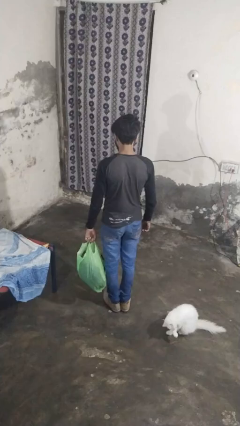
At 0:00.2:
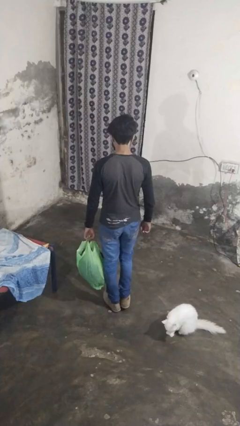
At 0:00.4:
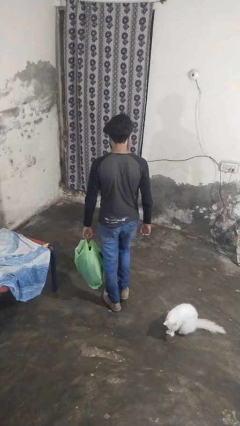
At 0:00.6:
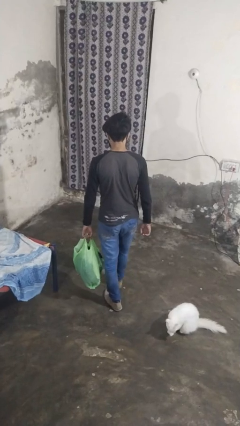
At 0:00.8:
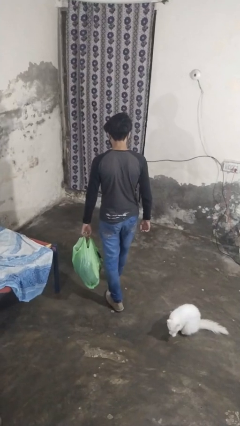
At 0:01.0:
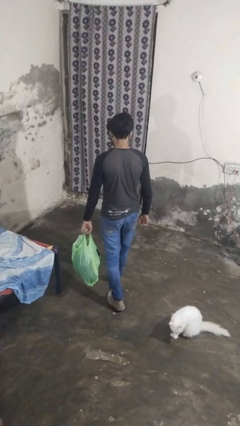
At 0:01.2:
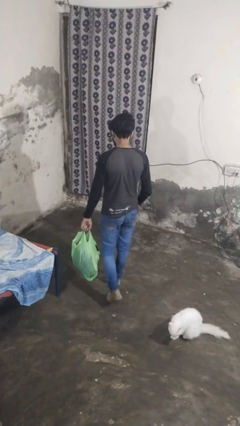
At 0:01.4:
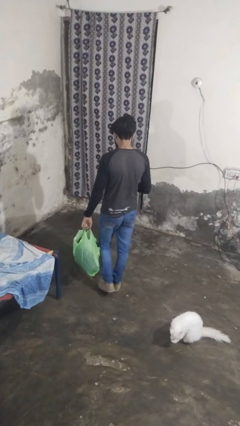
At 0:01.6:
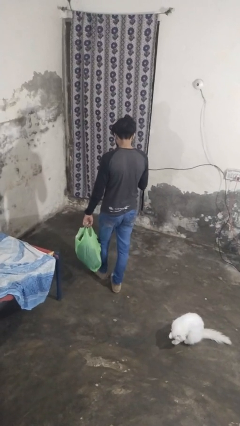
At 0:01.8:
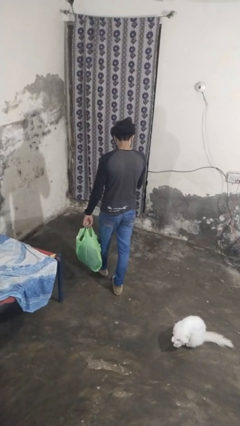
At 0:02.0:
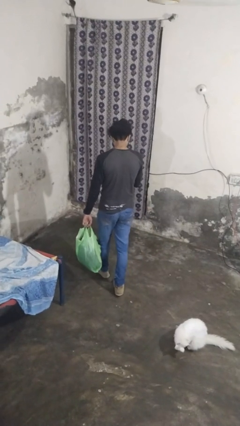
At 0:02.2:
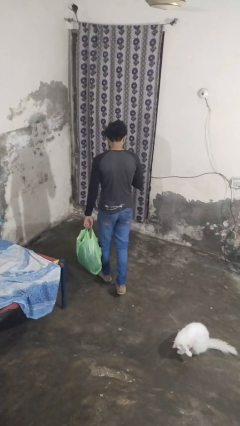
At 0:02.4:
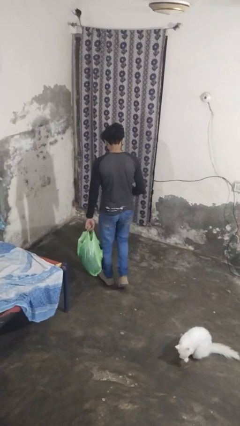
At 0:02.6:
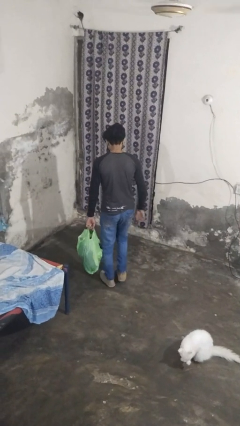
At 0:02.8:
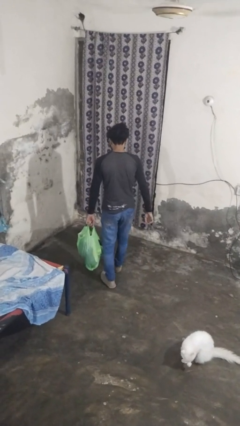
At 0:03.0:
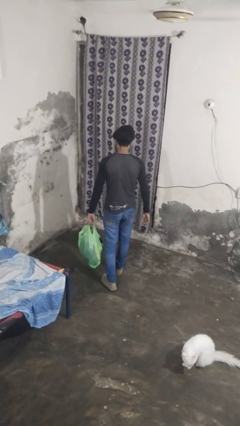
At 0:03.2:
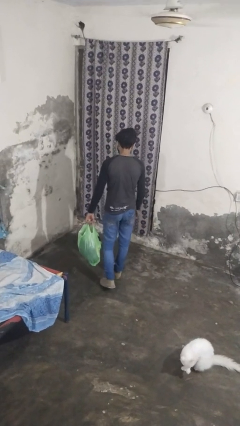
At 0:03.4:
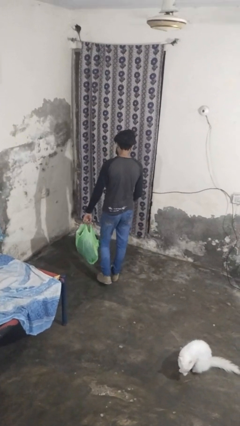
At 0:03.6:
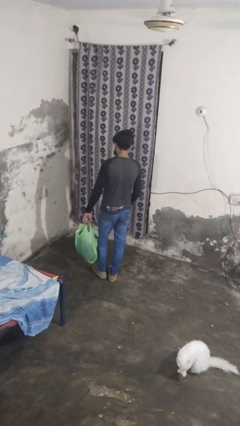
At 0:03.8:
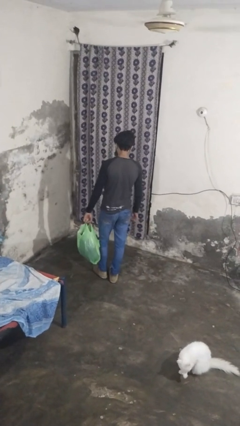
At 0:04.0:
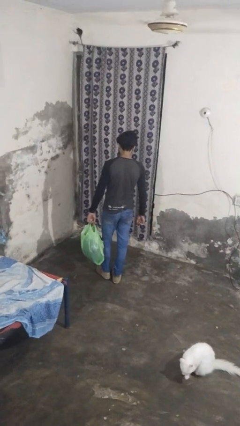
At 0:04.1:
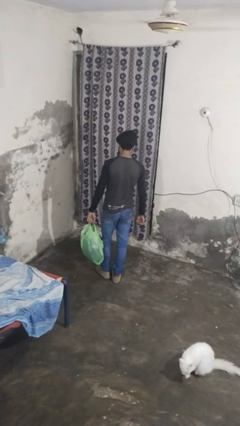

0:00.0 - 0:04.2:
person carries groceries

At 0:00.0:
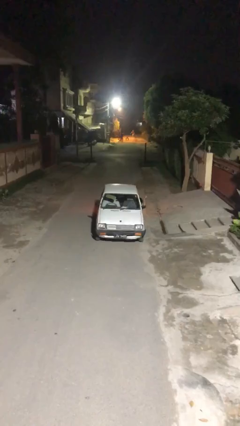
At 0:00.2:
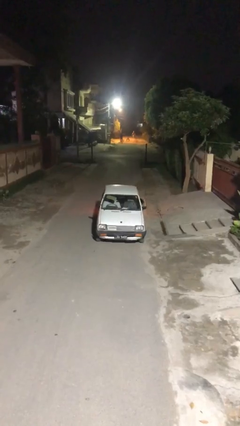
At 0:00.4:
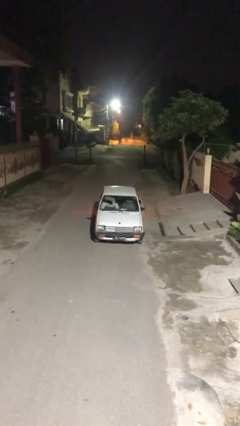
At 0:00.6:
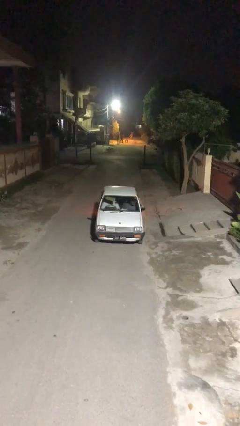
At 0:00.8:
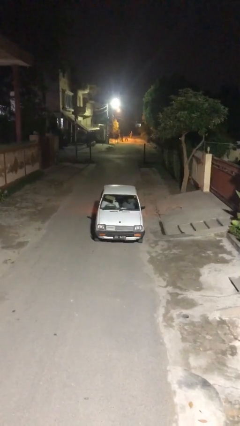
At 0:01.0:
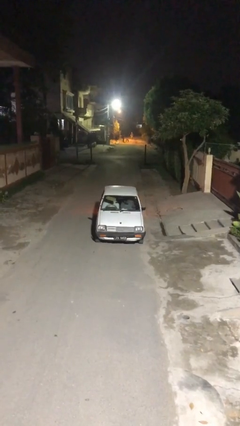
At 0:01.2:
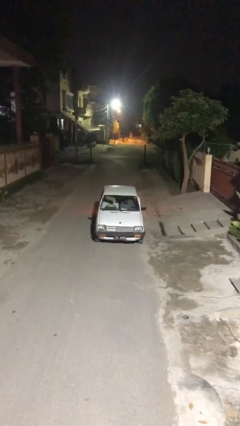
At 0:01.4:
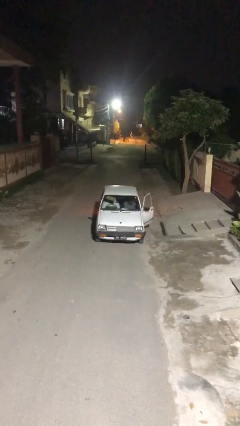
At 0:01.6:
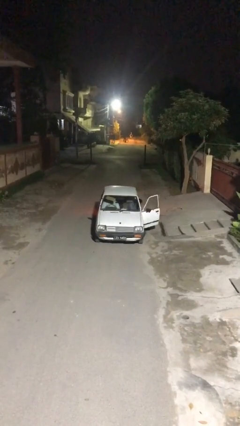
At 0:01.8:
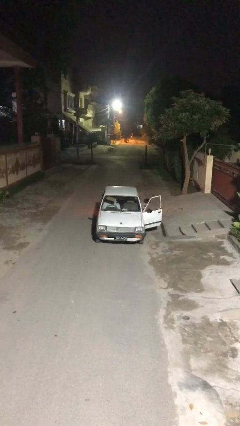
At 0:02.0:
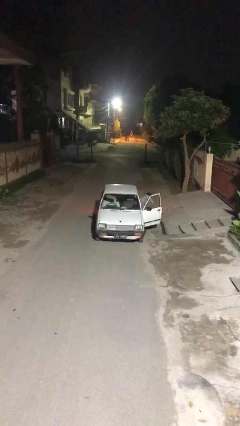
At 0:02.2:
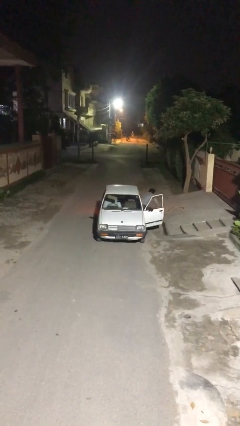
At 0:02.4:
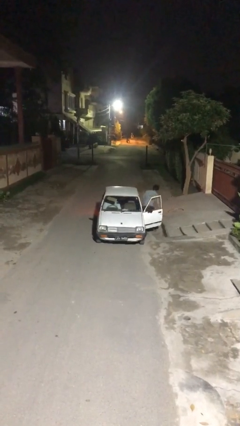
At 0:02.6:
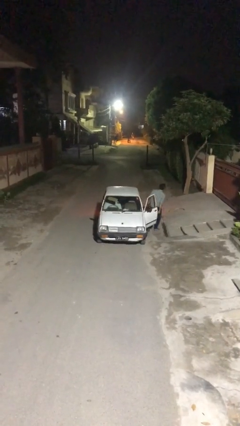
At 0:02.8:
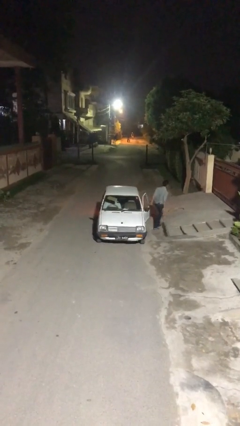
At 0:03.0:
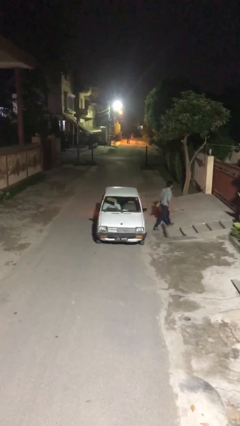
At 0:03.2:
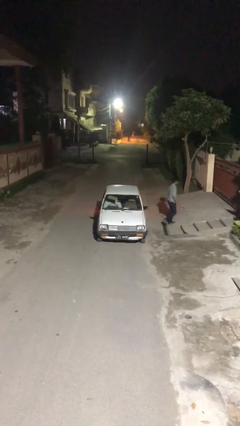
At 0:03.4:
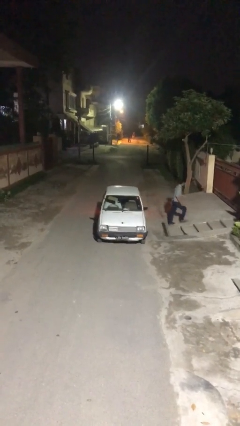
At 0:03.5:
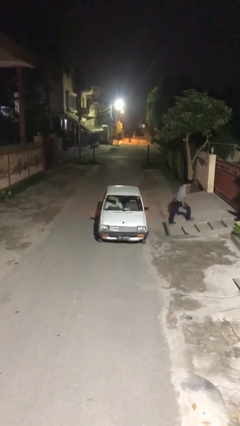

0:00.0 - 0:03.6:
car drops off person

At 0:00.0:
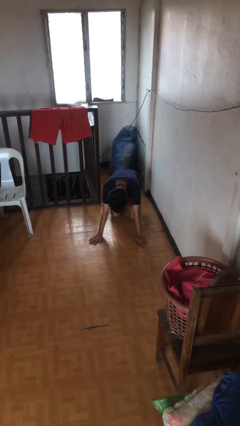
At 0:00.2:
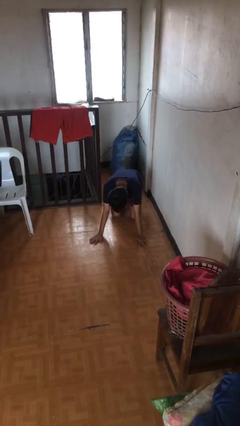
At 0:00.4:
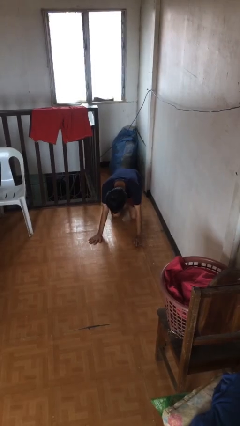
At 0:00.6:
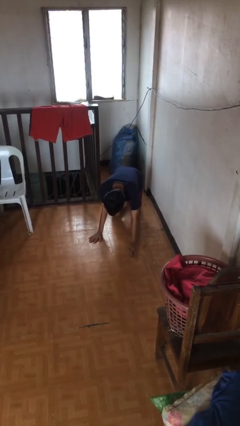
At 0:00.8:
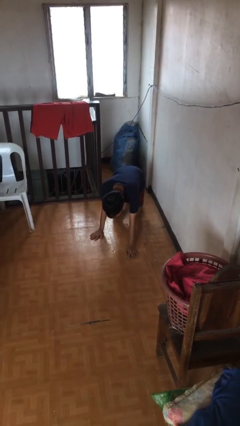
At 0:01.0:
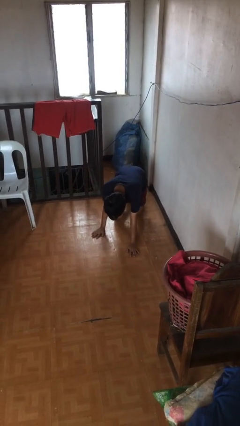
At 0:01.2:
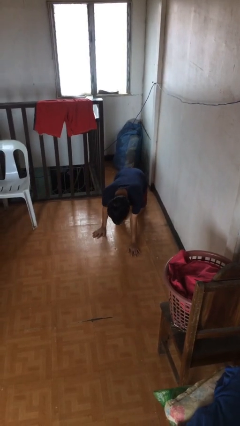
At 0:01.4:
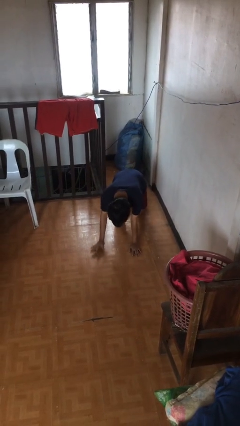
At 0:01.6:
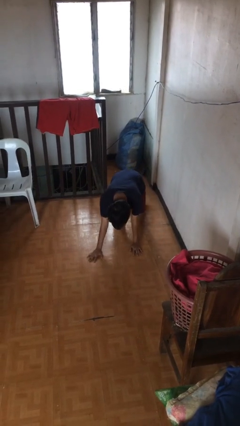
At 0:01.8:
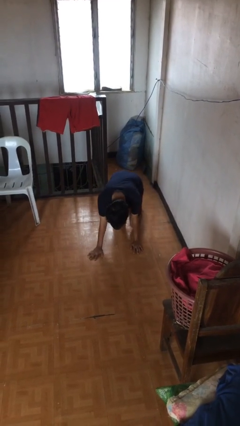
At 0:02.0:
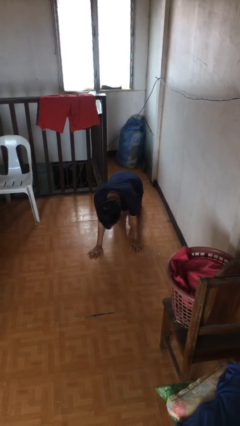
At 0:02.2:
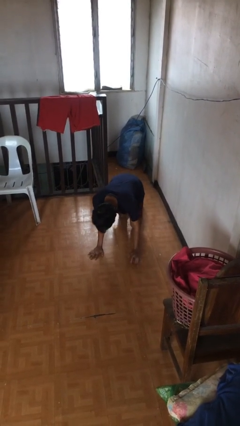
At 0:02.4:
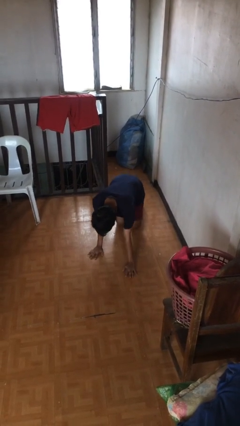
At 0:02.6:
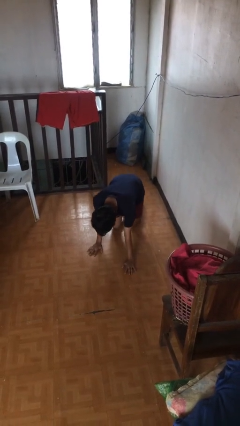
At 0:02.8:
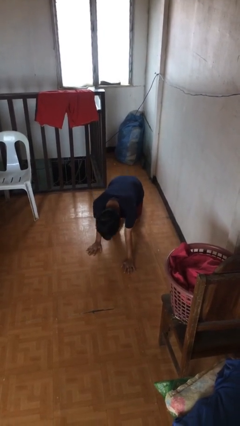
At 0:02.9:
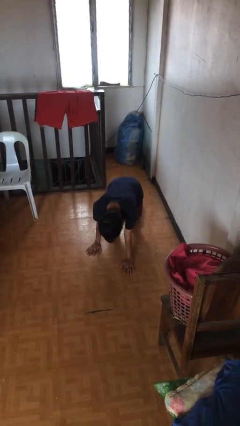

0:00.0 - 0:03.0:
person crawls

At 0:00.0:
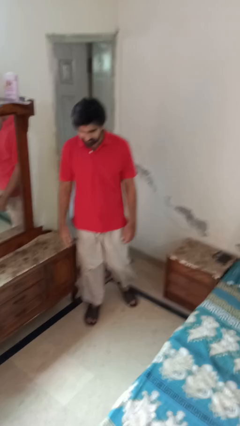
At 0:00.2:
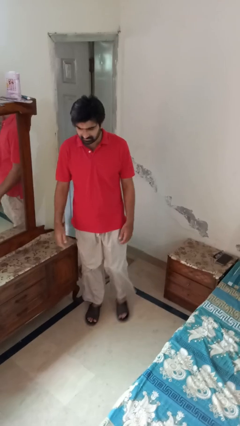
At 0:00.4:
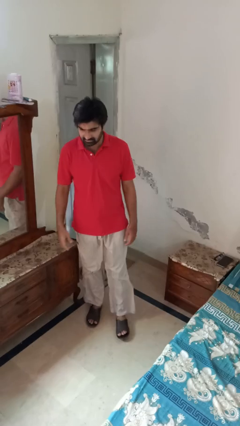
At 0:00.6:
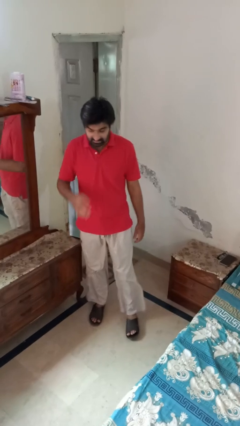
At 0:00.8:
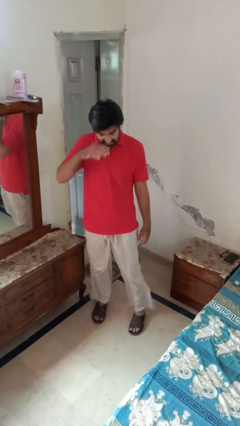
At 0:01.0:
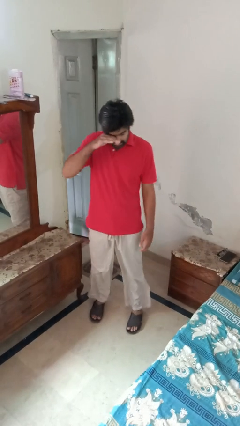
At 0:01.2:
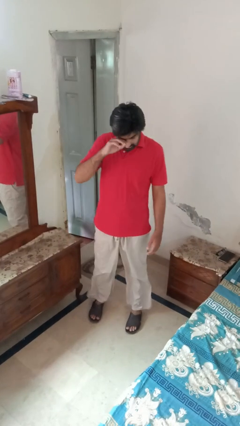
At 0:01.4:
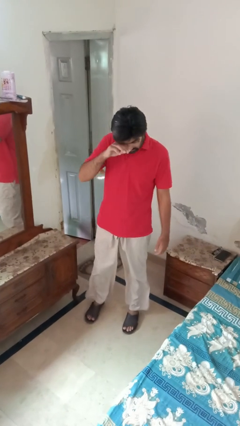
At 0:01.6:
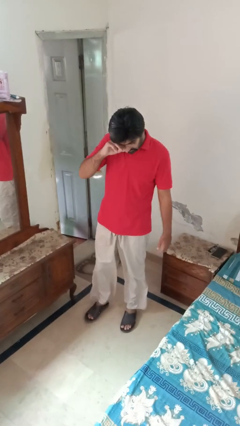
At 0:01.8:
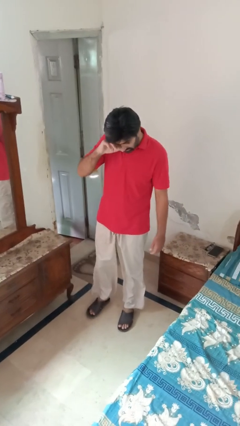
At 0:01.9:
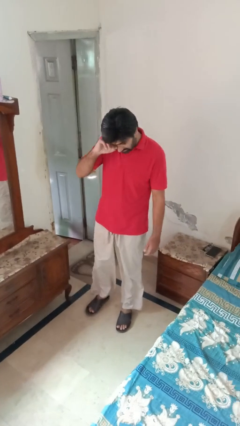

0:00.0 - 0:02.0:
person rubs eyes

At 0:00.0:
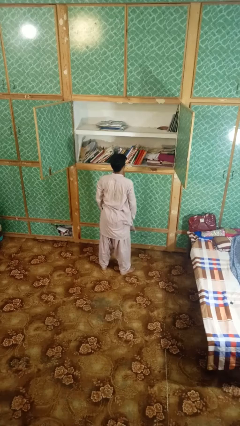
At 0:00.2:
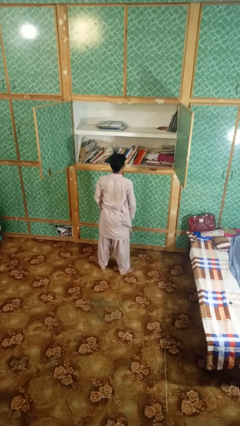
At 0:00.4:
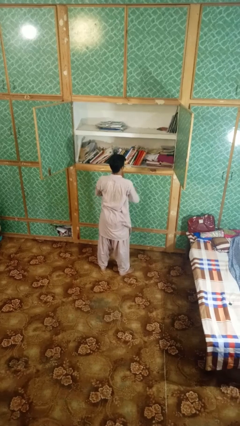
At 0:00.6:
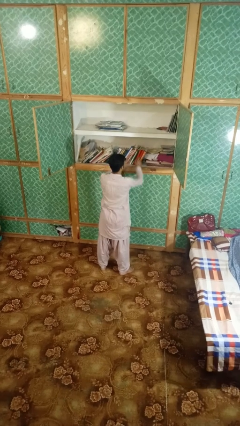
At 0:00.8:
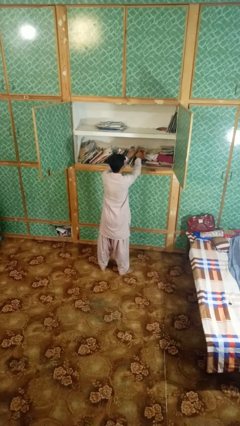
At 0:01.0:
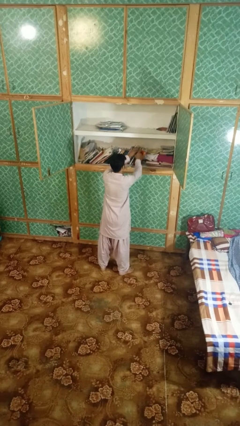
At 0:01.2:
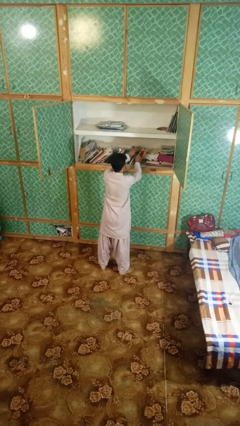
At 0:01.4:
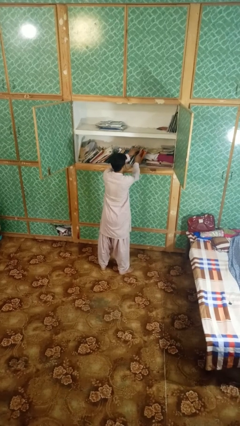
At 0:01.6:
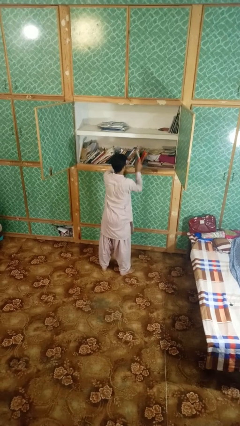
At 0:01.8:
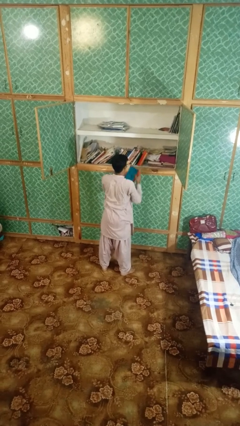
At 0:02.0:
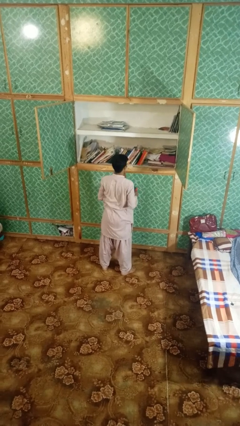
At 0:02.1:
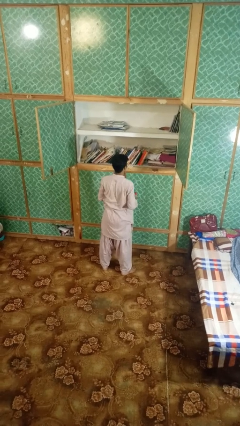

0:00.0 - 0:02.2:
person picks up object from shelf

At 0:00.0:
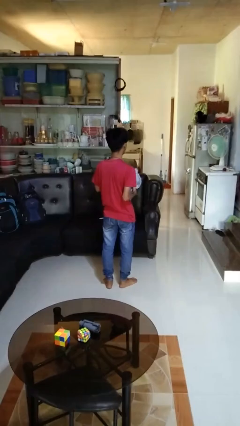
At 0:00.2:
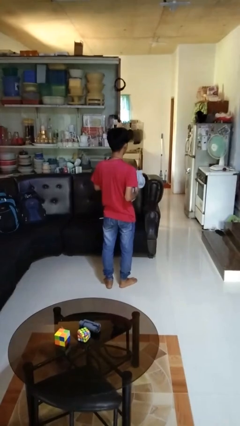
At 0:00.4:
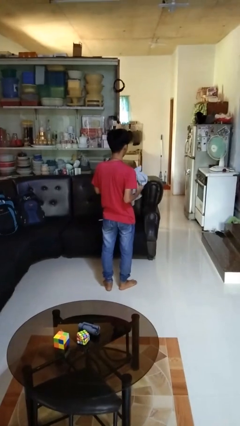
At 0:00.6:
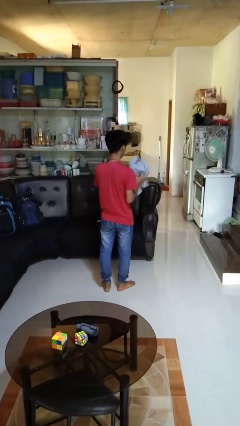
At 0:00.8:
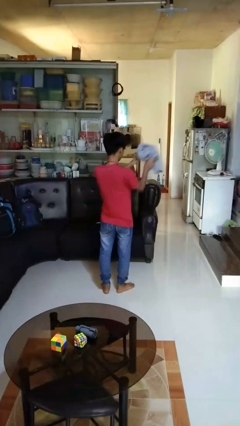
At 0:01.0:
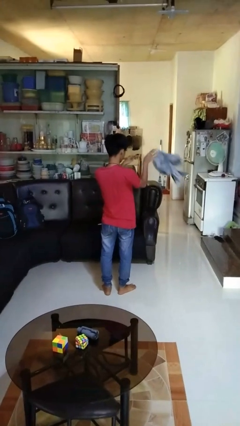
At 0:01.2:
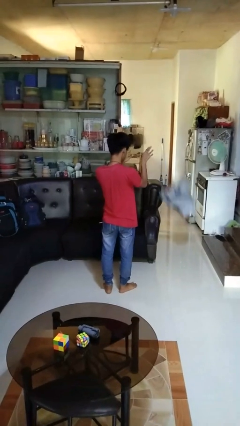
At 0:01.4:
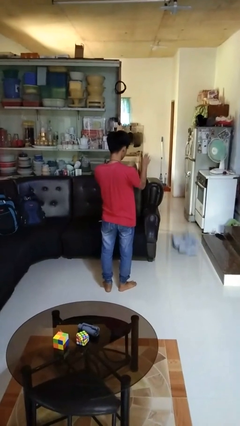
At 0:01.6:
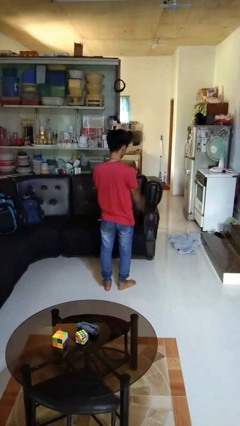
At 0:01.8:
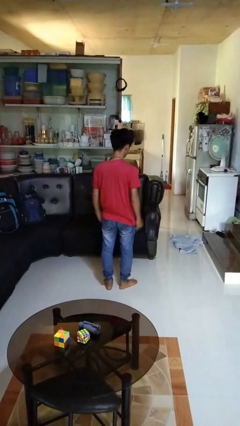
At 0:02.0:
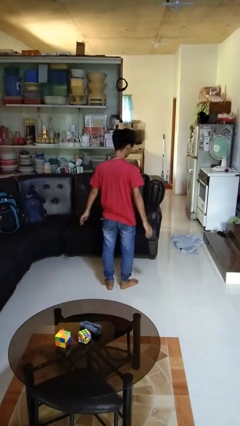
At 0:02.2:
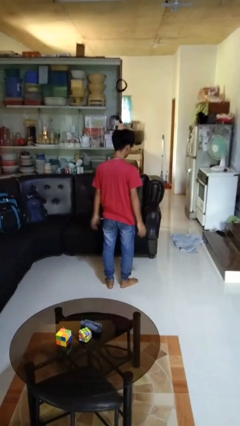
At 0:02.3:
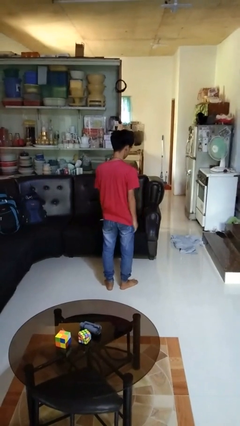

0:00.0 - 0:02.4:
person throws object into air

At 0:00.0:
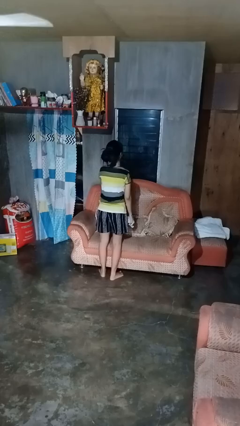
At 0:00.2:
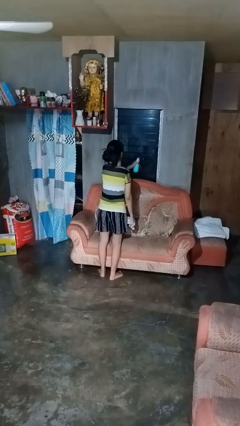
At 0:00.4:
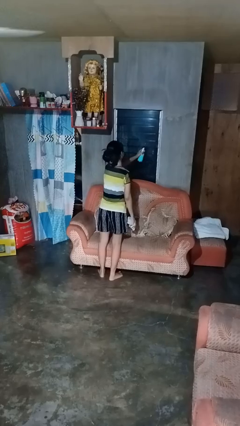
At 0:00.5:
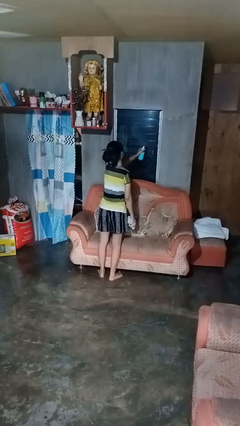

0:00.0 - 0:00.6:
person sprays from bottle
